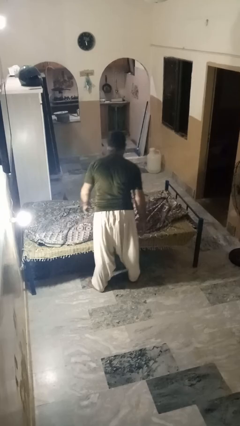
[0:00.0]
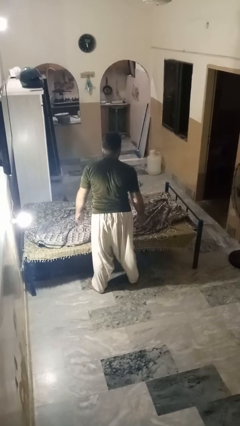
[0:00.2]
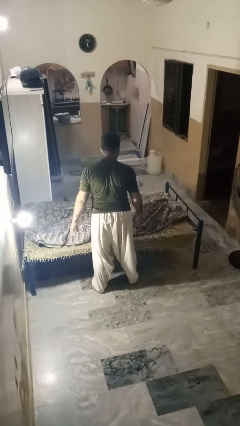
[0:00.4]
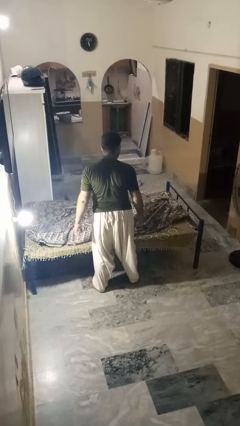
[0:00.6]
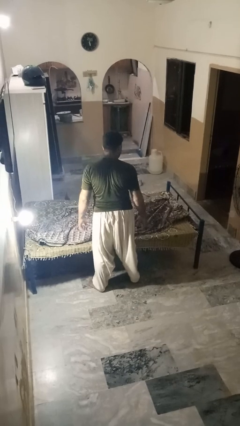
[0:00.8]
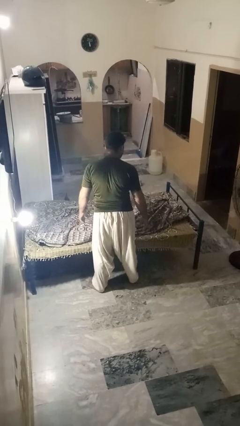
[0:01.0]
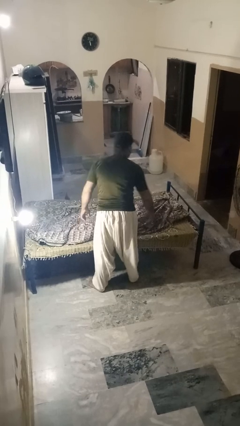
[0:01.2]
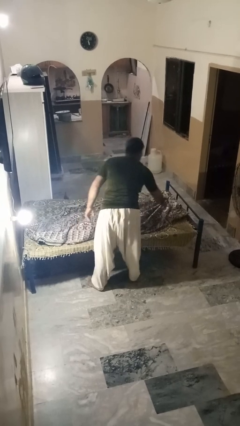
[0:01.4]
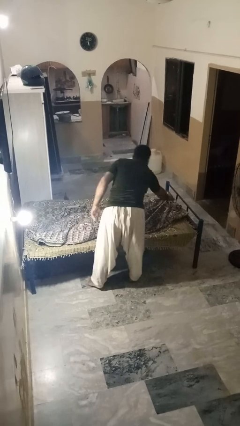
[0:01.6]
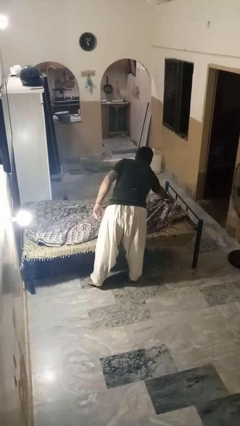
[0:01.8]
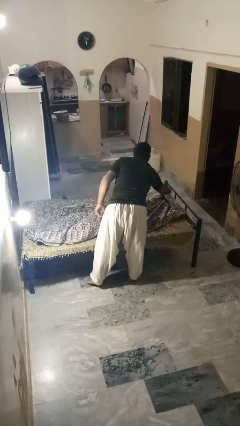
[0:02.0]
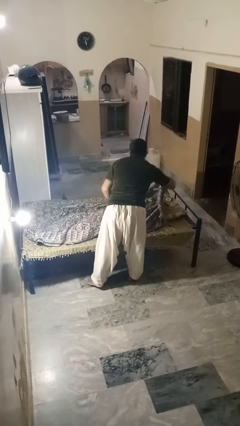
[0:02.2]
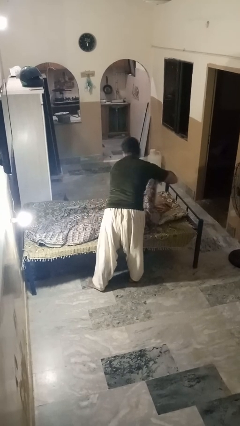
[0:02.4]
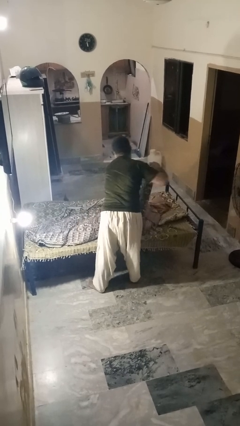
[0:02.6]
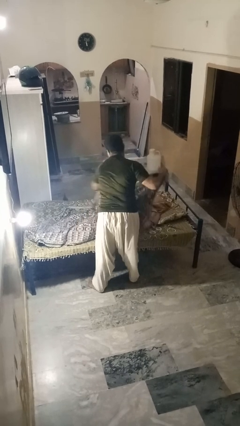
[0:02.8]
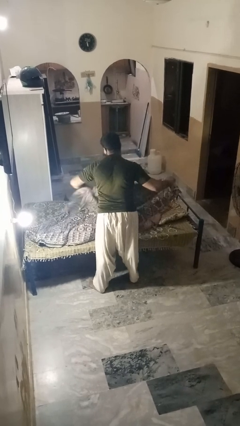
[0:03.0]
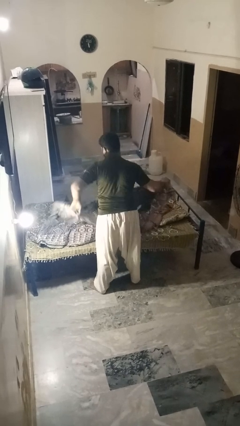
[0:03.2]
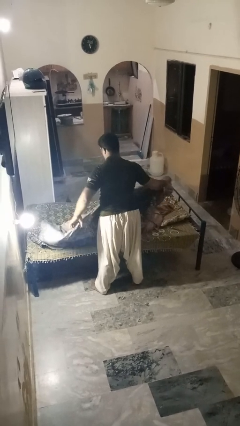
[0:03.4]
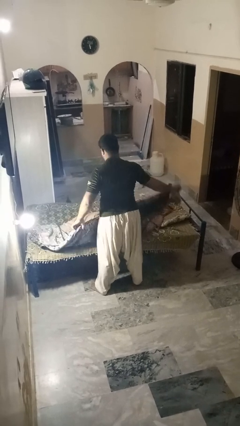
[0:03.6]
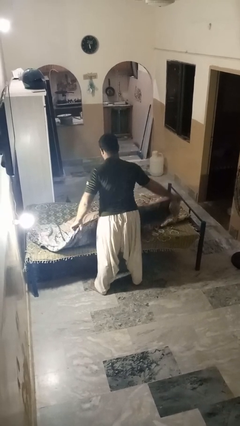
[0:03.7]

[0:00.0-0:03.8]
person uncovers friend with blanket

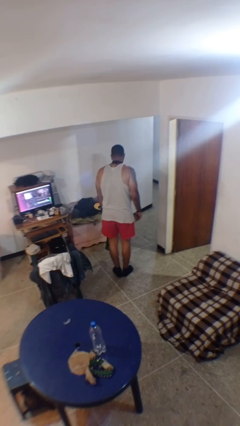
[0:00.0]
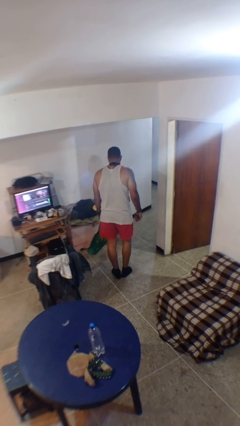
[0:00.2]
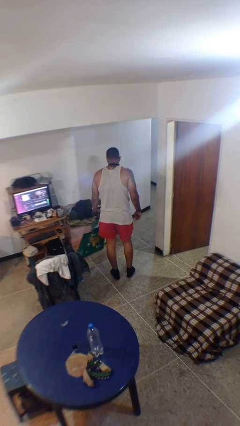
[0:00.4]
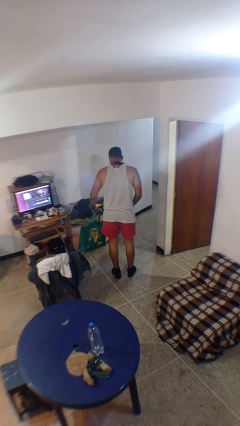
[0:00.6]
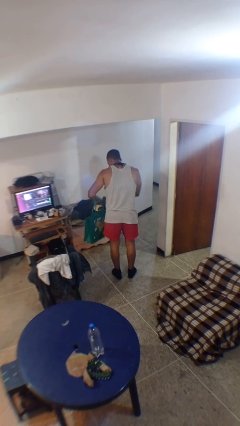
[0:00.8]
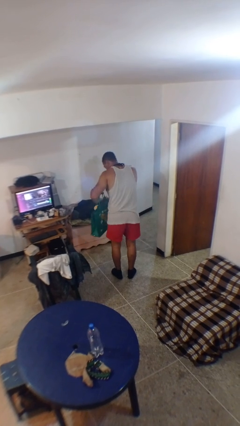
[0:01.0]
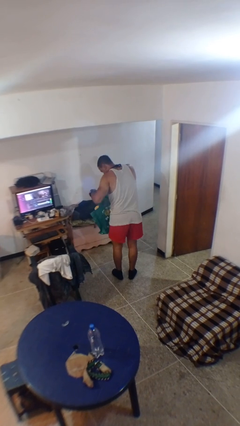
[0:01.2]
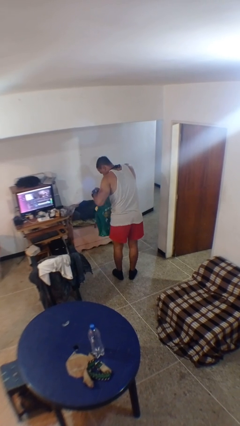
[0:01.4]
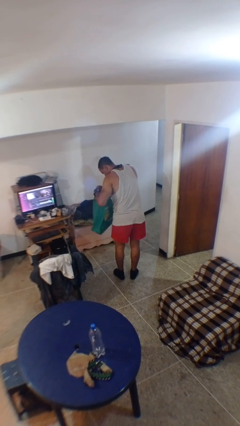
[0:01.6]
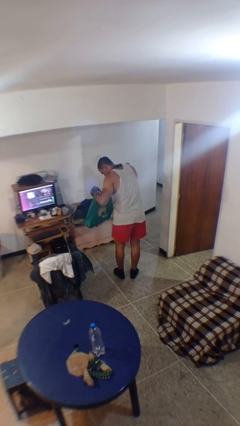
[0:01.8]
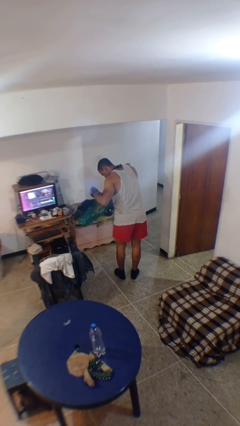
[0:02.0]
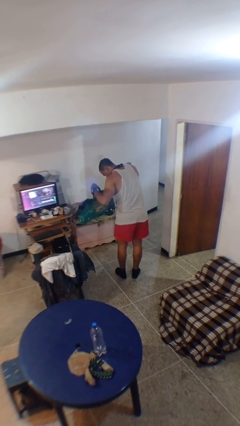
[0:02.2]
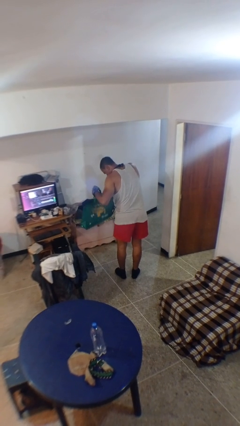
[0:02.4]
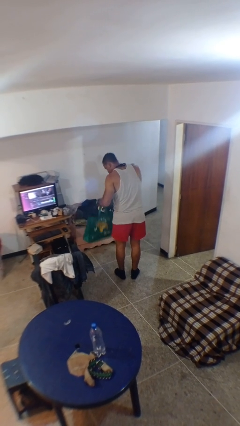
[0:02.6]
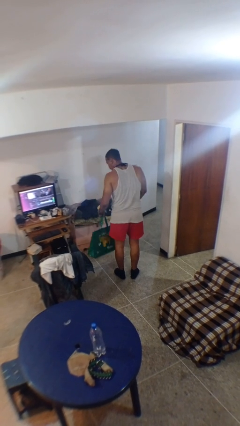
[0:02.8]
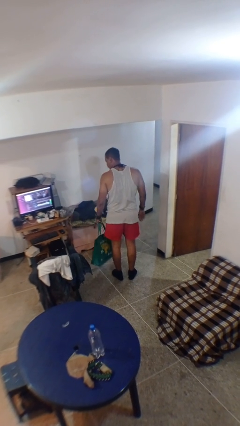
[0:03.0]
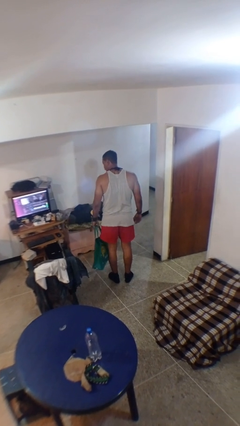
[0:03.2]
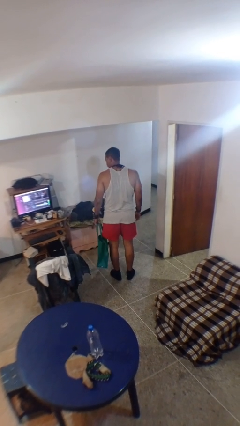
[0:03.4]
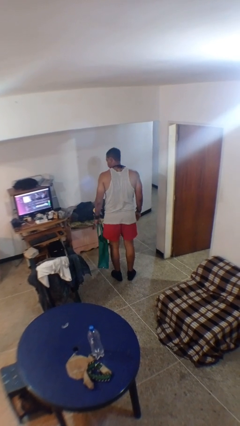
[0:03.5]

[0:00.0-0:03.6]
person searches in bag

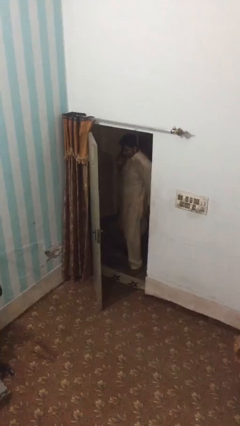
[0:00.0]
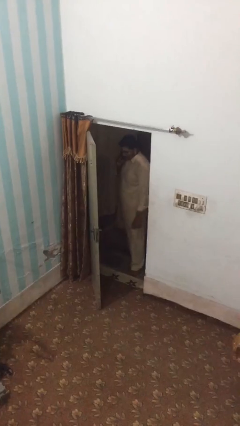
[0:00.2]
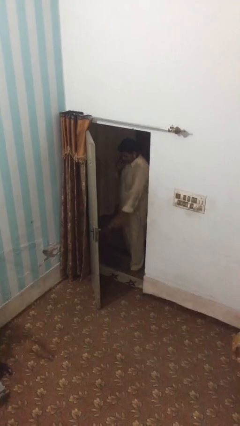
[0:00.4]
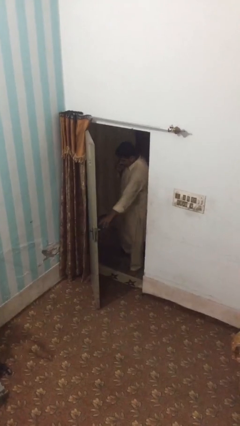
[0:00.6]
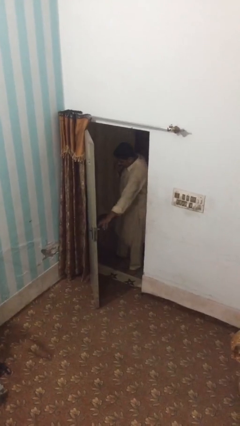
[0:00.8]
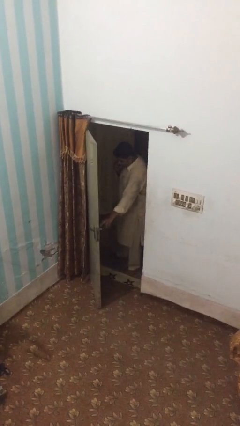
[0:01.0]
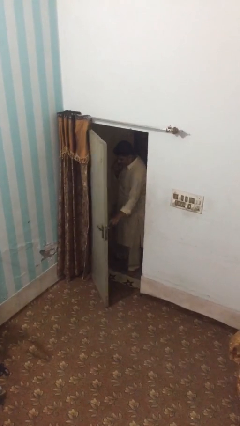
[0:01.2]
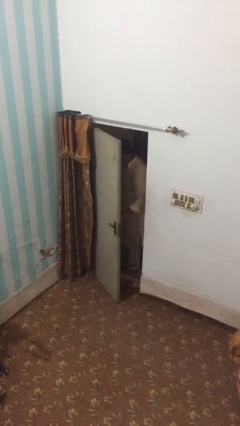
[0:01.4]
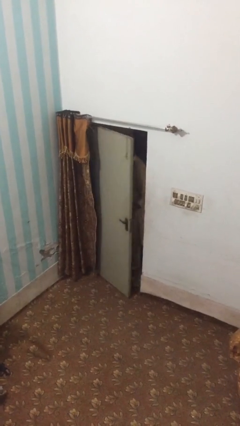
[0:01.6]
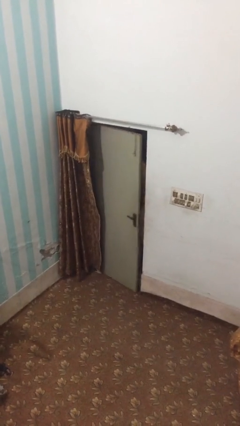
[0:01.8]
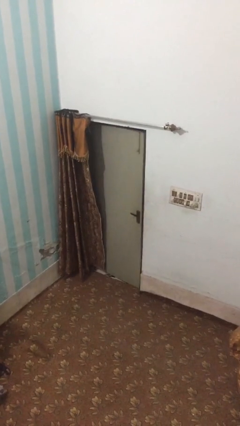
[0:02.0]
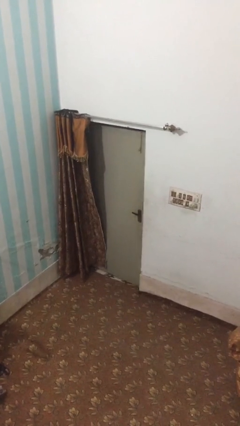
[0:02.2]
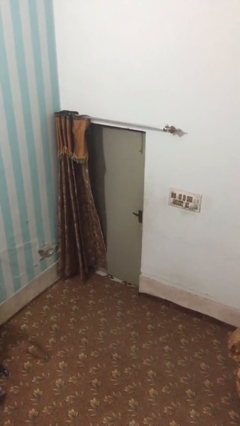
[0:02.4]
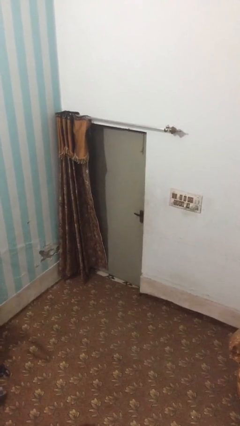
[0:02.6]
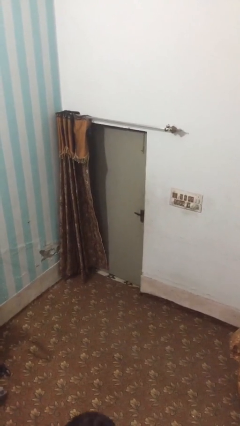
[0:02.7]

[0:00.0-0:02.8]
person closes facility door

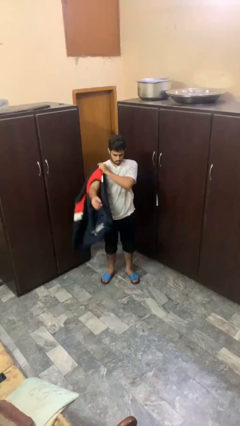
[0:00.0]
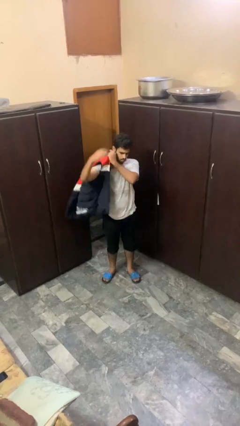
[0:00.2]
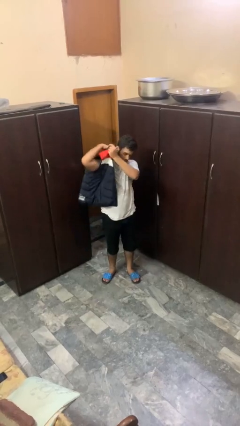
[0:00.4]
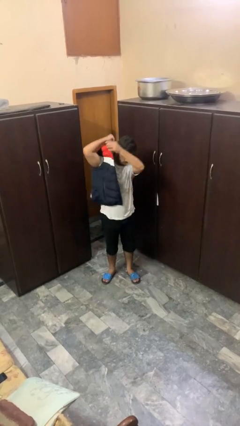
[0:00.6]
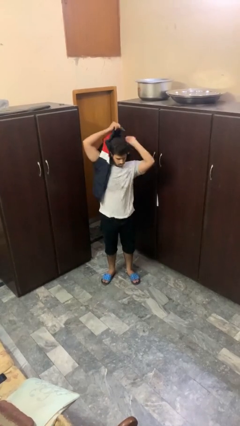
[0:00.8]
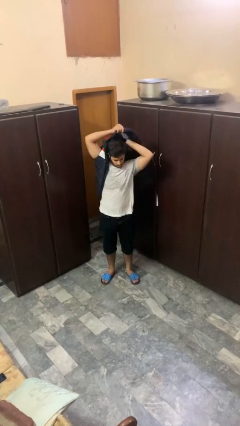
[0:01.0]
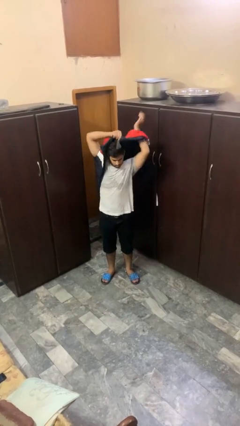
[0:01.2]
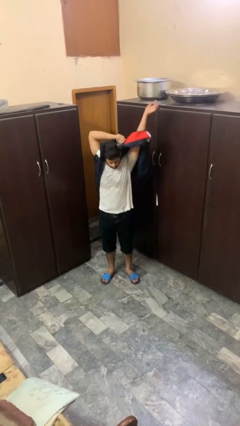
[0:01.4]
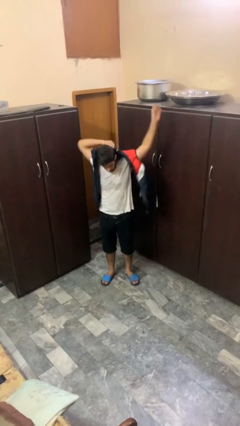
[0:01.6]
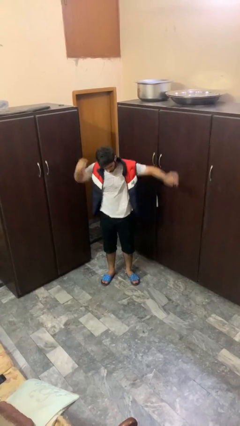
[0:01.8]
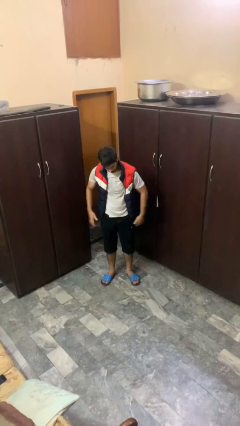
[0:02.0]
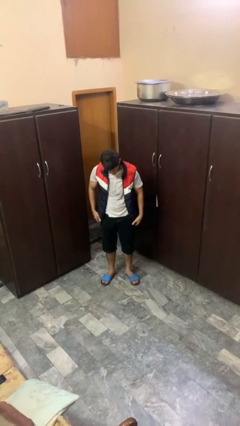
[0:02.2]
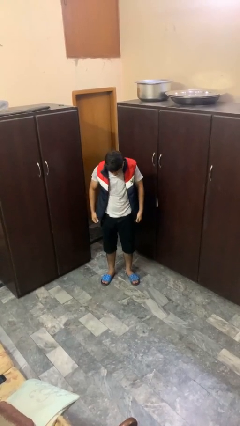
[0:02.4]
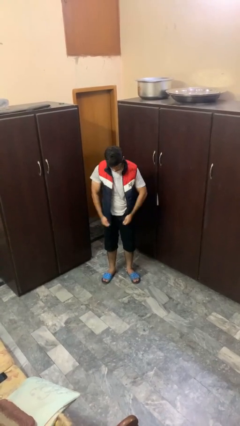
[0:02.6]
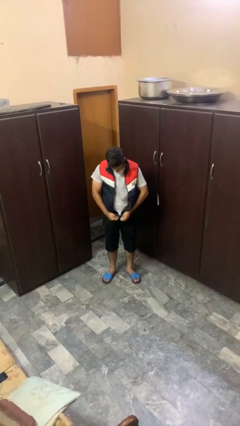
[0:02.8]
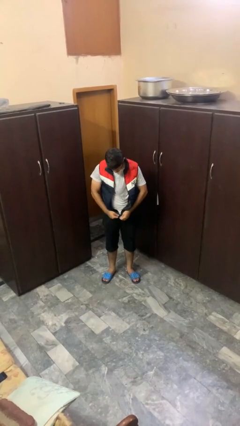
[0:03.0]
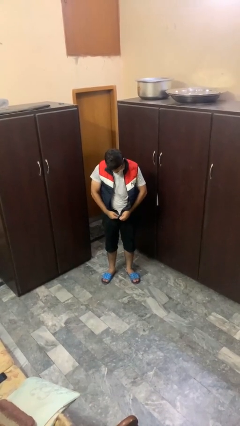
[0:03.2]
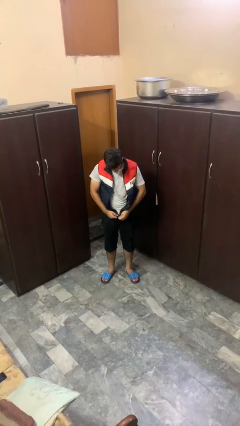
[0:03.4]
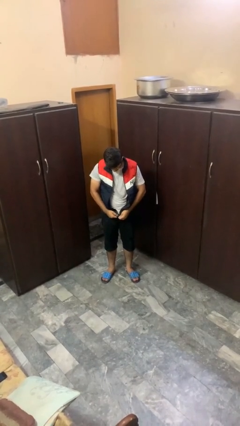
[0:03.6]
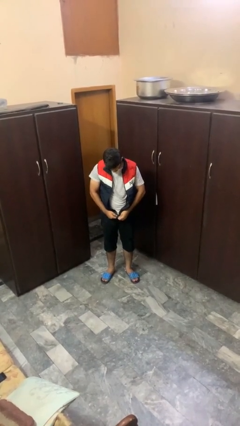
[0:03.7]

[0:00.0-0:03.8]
person puts on jacket

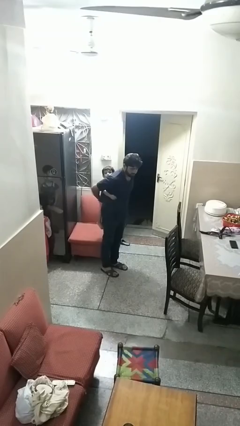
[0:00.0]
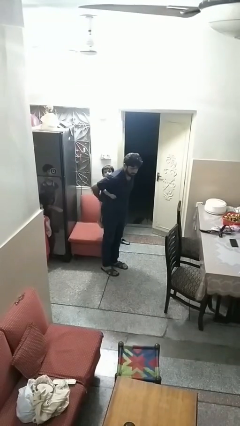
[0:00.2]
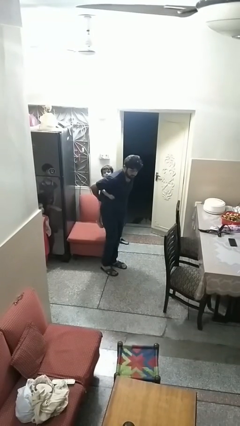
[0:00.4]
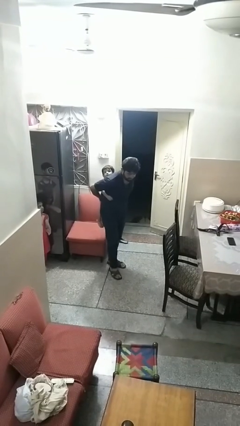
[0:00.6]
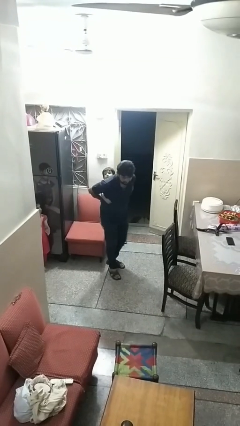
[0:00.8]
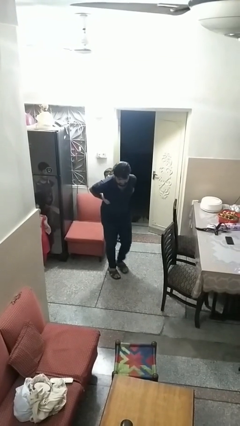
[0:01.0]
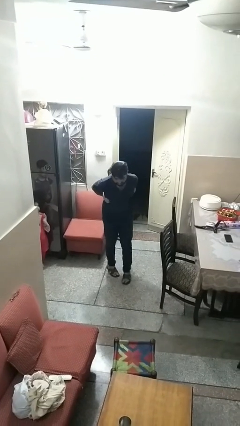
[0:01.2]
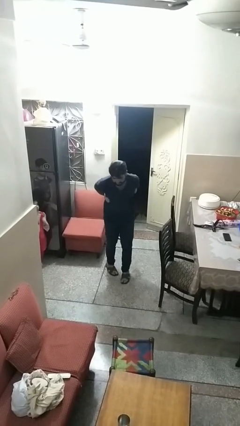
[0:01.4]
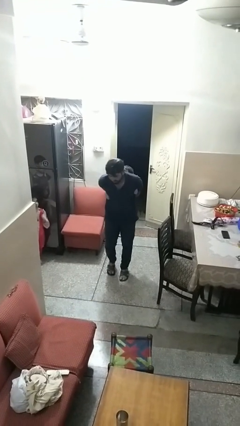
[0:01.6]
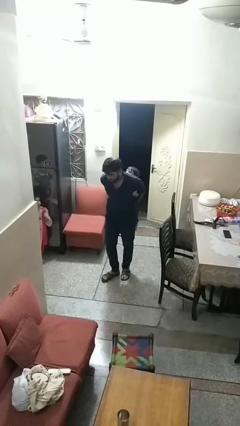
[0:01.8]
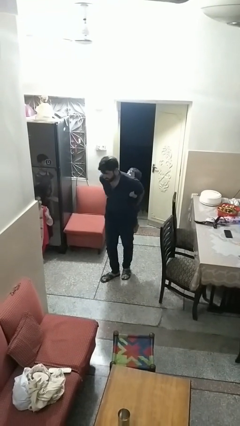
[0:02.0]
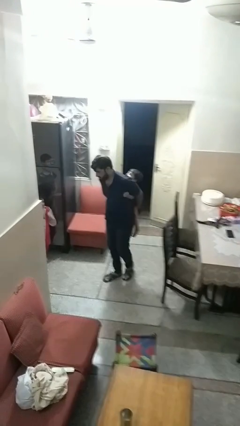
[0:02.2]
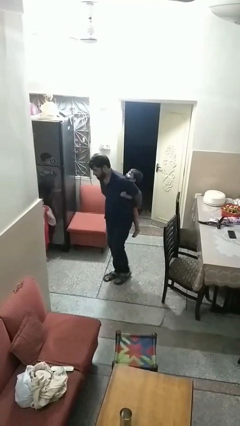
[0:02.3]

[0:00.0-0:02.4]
person carries person on back

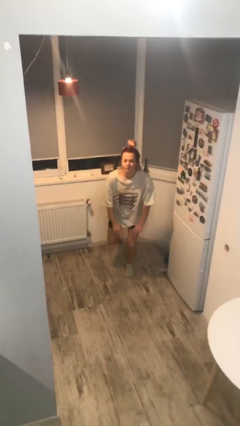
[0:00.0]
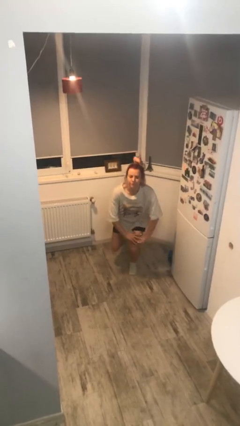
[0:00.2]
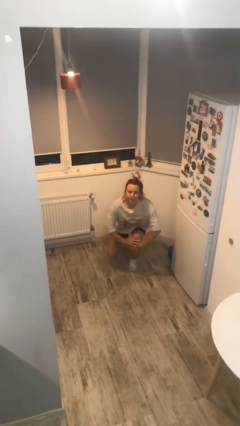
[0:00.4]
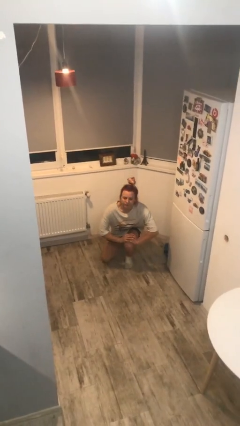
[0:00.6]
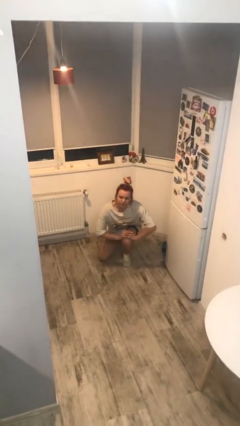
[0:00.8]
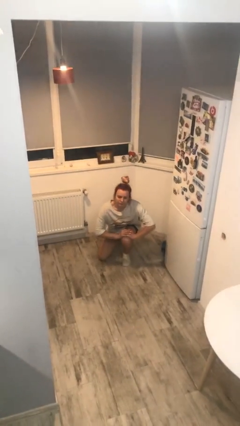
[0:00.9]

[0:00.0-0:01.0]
person kneels
